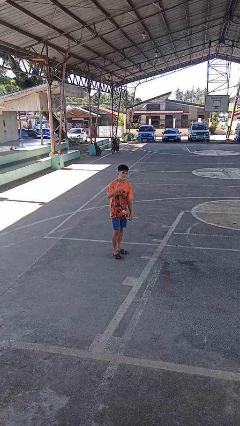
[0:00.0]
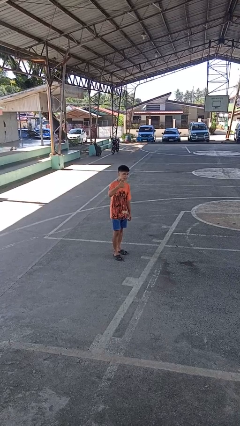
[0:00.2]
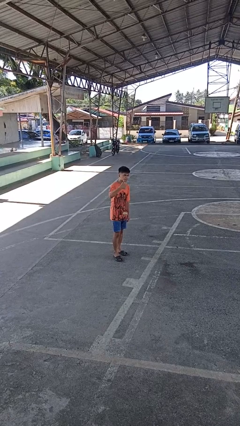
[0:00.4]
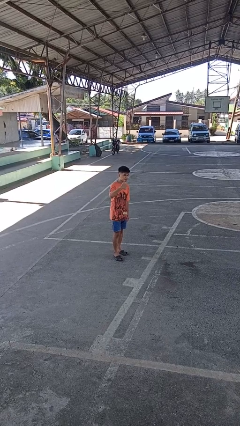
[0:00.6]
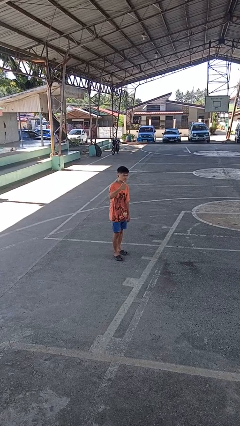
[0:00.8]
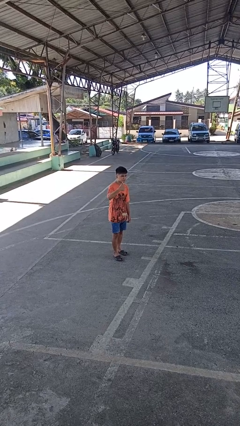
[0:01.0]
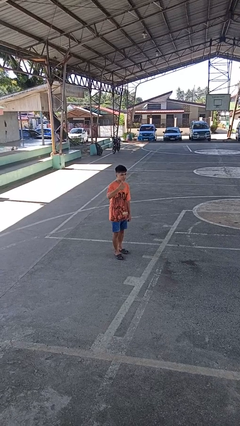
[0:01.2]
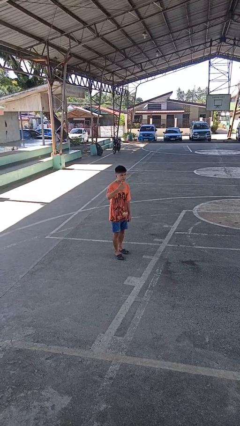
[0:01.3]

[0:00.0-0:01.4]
person gestures thumbs up

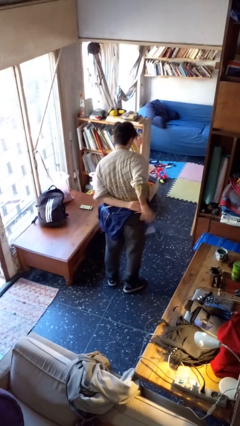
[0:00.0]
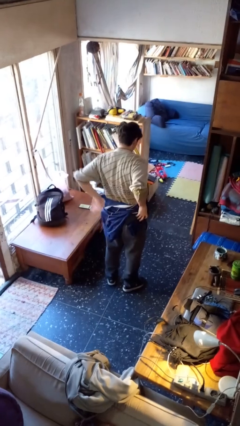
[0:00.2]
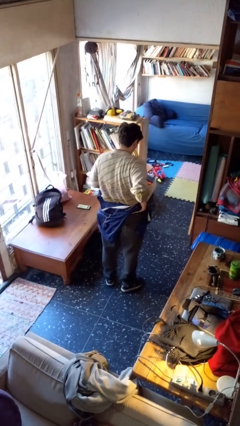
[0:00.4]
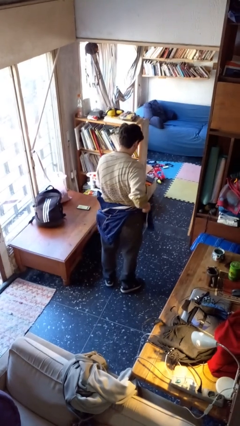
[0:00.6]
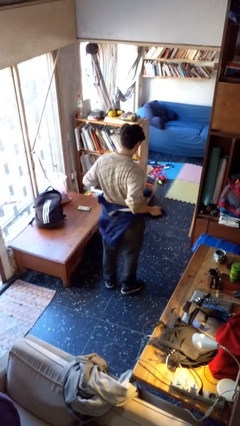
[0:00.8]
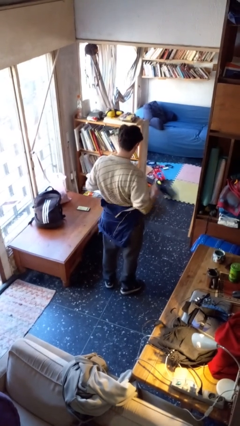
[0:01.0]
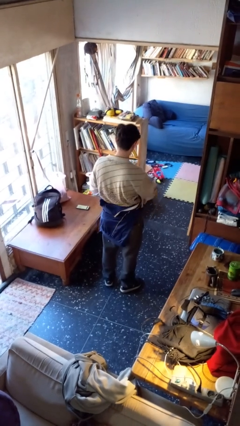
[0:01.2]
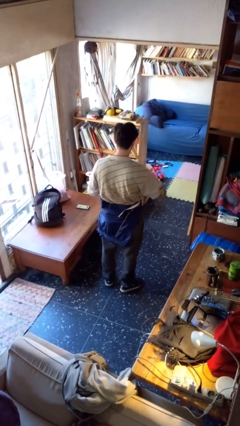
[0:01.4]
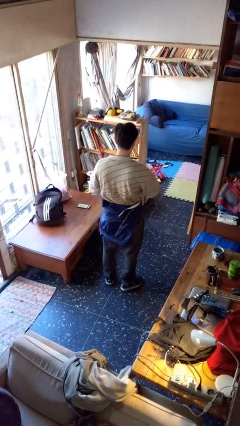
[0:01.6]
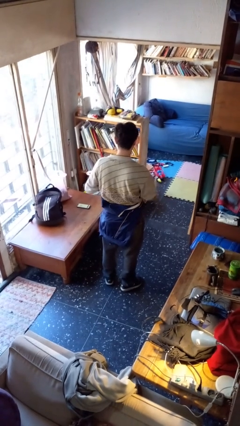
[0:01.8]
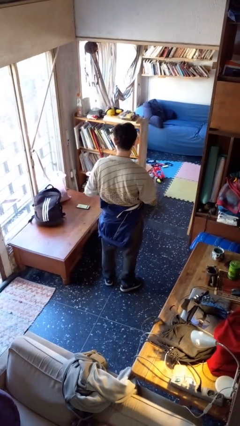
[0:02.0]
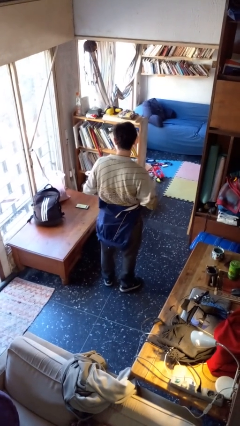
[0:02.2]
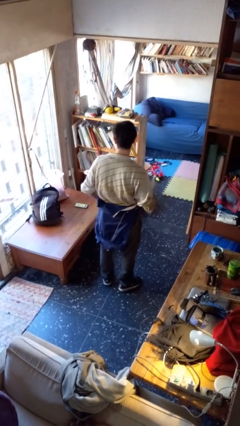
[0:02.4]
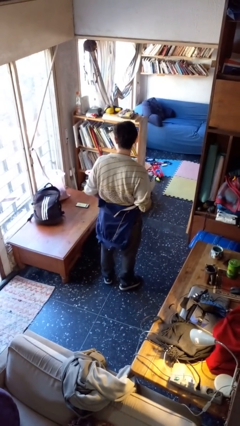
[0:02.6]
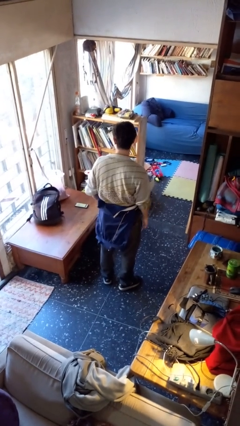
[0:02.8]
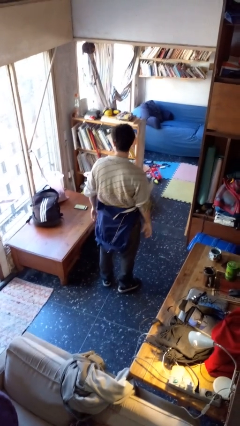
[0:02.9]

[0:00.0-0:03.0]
person ties jacket around waist

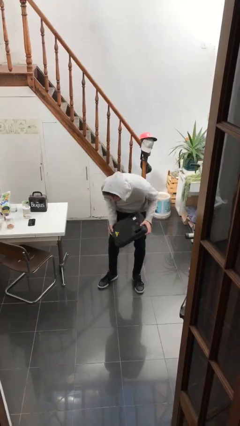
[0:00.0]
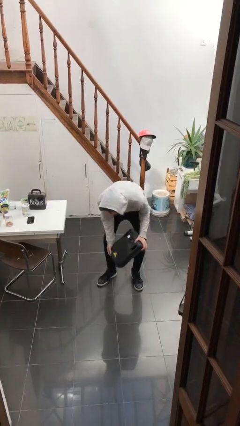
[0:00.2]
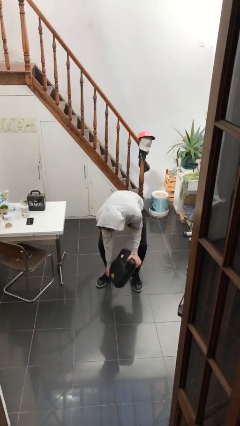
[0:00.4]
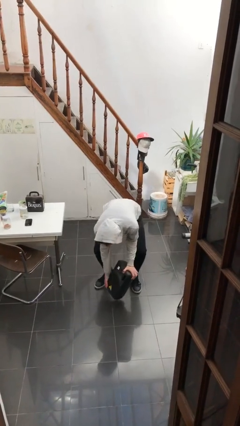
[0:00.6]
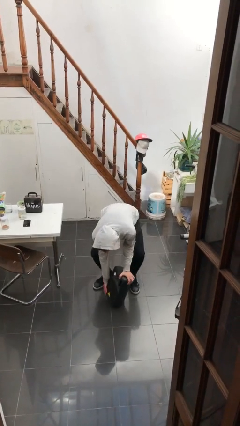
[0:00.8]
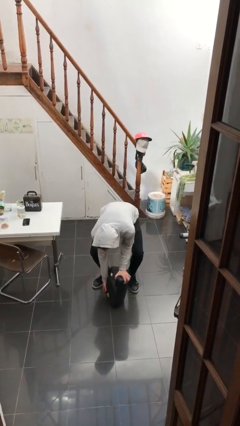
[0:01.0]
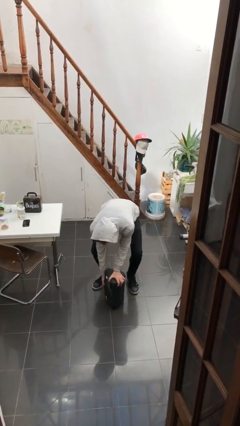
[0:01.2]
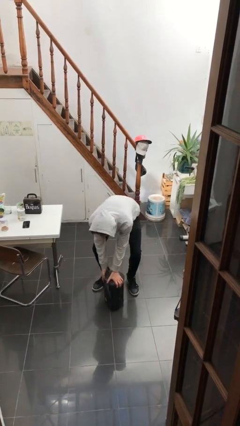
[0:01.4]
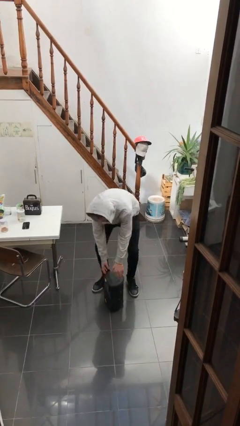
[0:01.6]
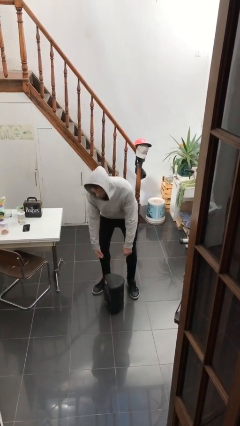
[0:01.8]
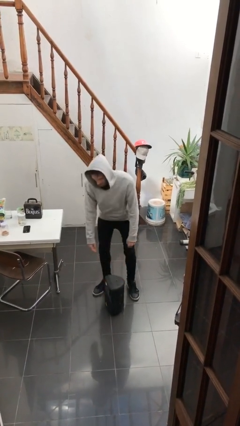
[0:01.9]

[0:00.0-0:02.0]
person puts down object on floor

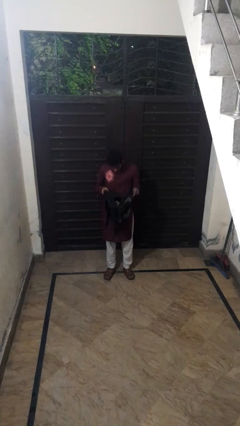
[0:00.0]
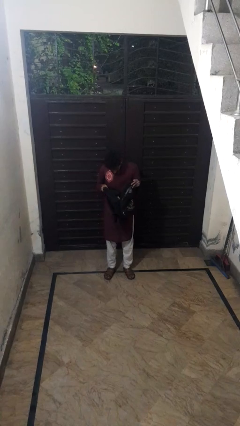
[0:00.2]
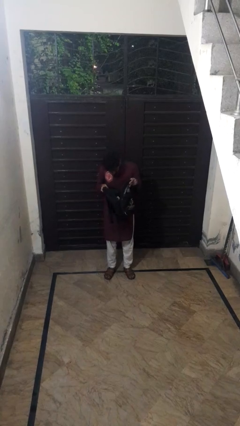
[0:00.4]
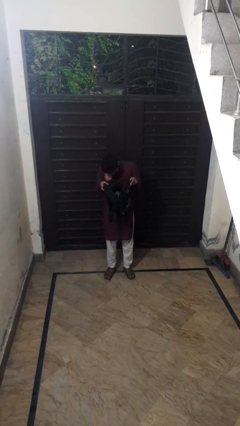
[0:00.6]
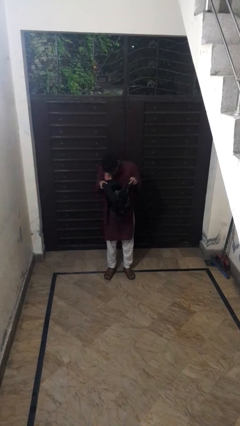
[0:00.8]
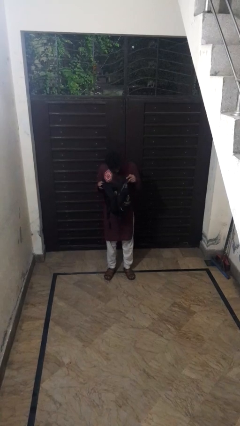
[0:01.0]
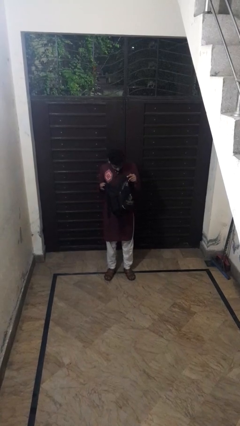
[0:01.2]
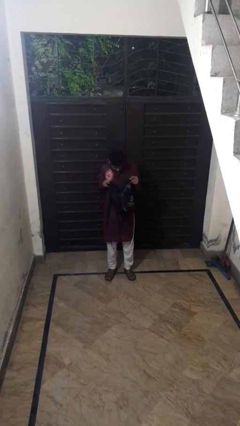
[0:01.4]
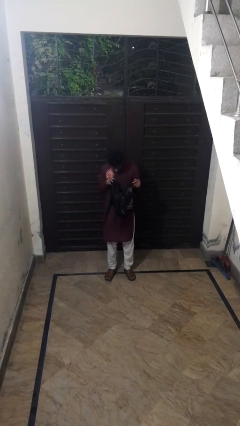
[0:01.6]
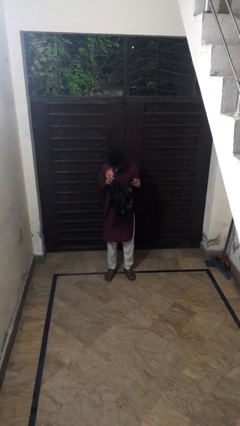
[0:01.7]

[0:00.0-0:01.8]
person searches in backpack

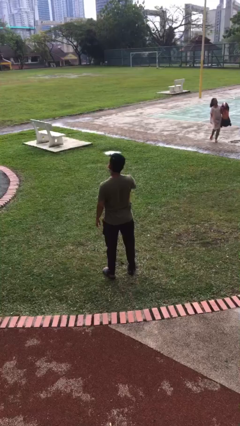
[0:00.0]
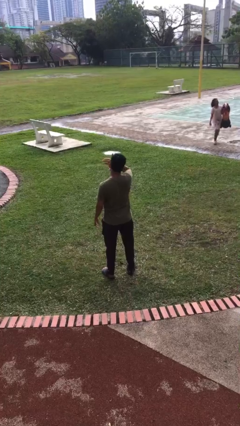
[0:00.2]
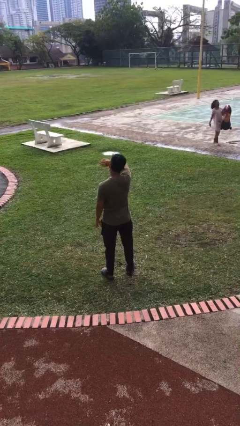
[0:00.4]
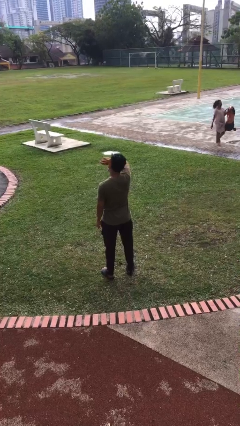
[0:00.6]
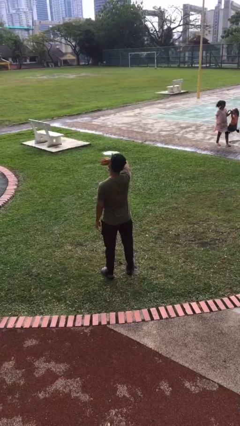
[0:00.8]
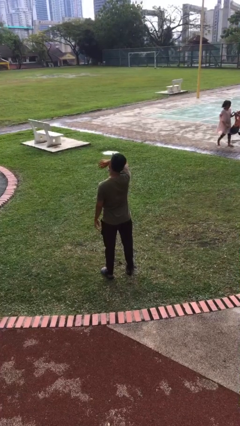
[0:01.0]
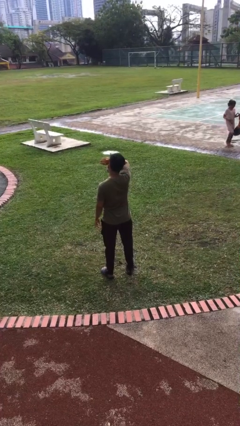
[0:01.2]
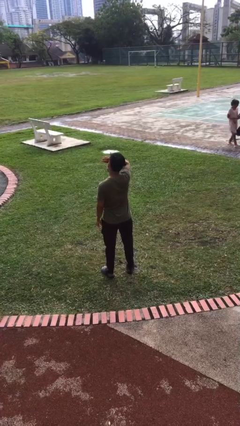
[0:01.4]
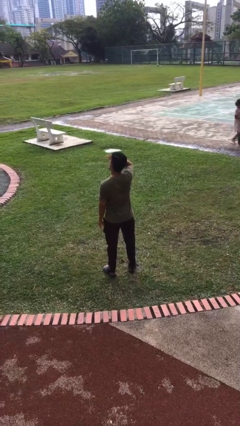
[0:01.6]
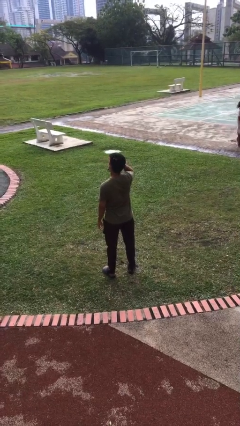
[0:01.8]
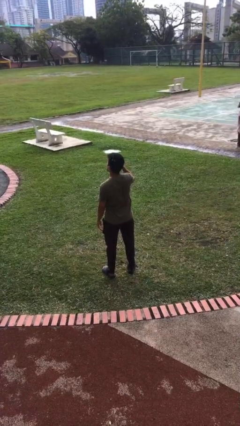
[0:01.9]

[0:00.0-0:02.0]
person rubs eyes

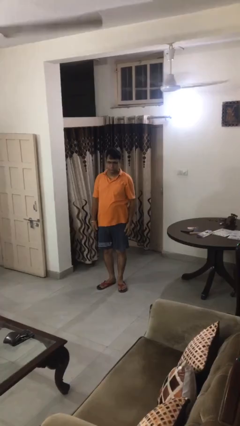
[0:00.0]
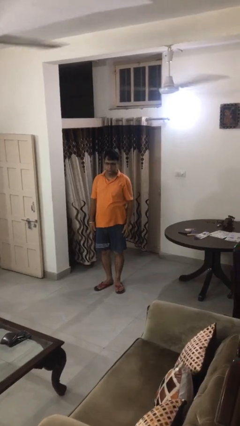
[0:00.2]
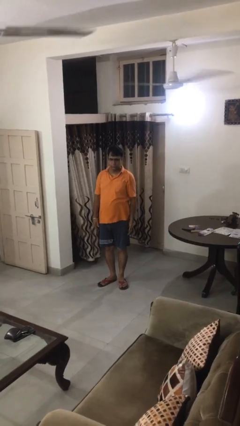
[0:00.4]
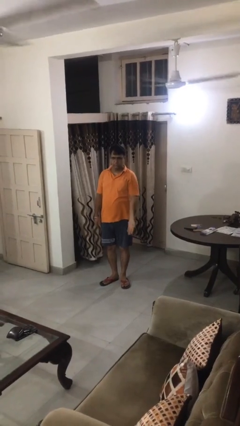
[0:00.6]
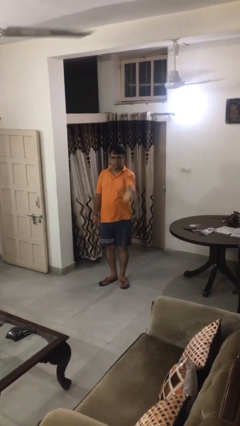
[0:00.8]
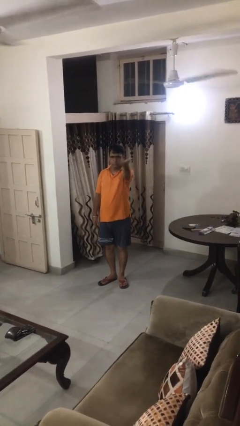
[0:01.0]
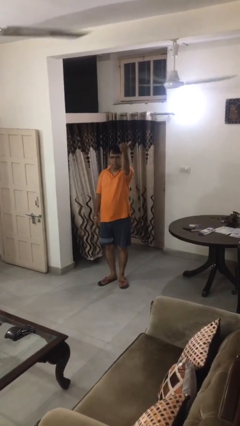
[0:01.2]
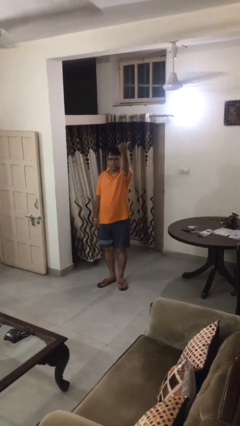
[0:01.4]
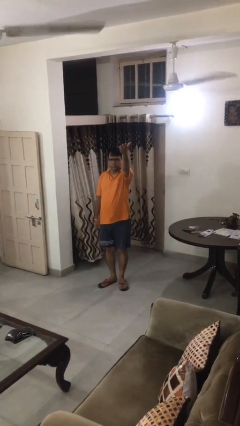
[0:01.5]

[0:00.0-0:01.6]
person gestures swipe up

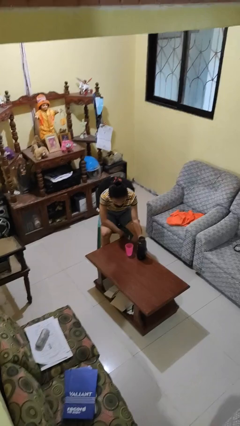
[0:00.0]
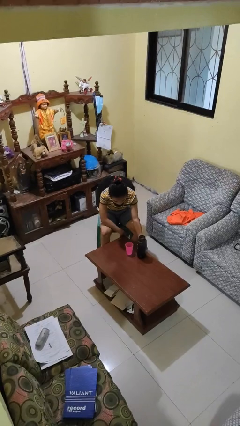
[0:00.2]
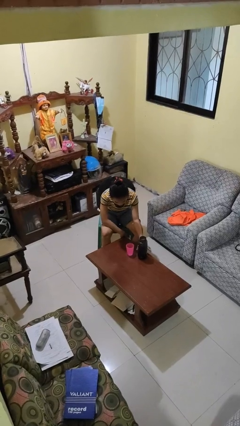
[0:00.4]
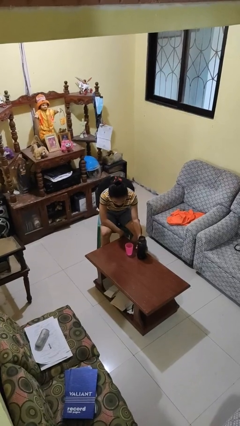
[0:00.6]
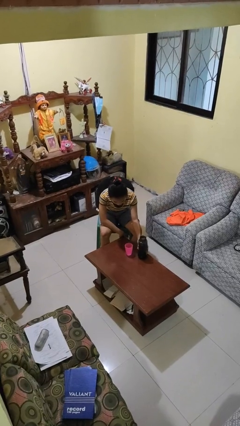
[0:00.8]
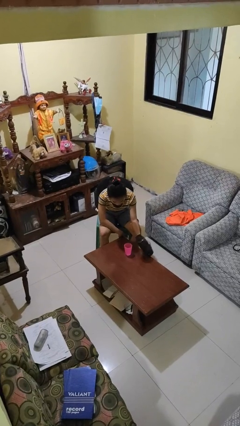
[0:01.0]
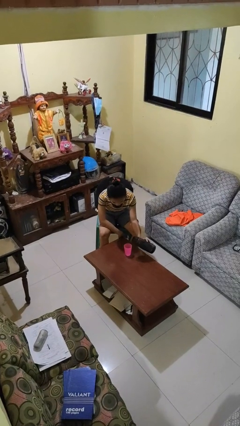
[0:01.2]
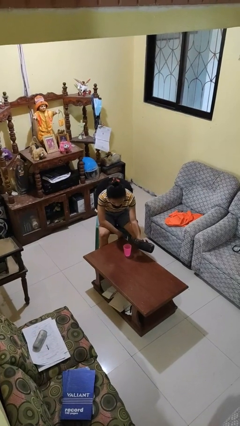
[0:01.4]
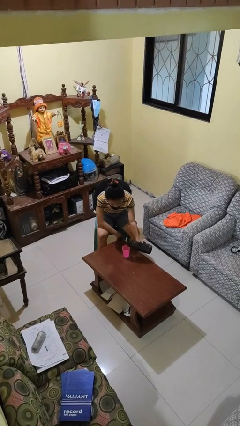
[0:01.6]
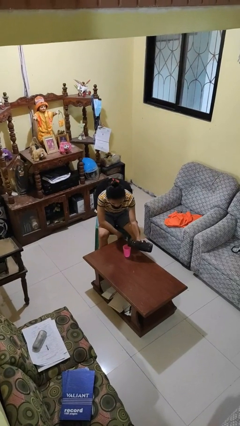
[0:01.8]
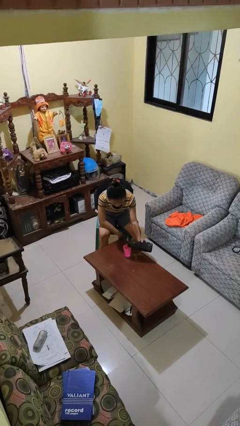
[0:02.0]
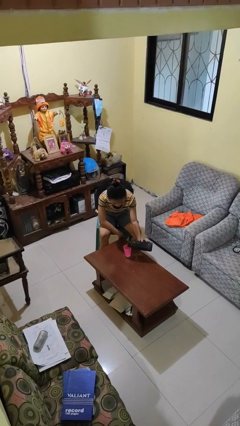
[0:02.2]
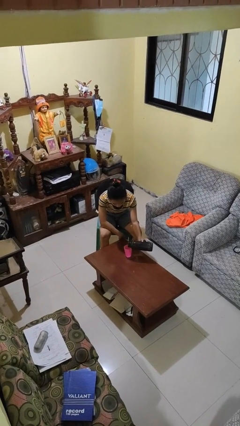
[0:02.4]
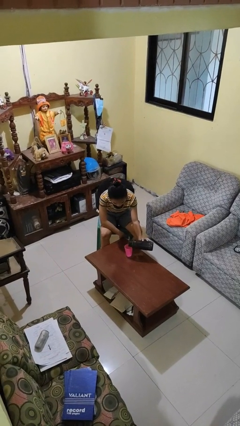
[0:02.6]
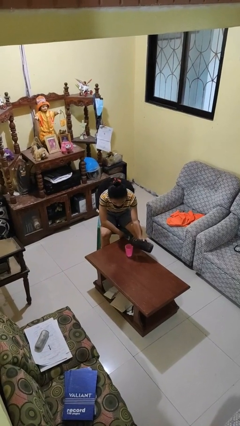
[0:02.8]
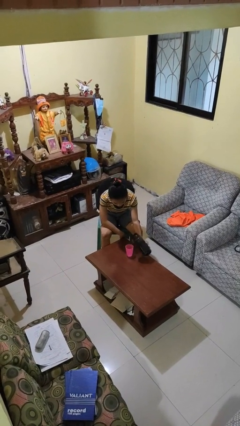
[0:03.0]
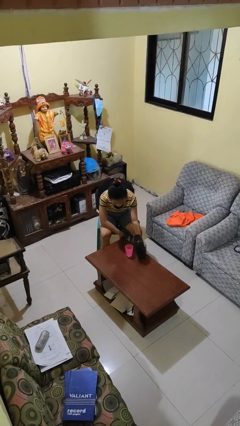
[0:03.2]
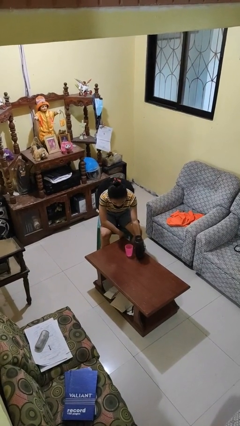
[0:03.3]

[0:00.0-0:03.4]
person pours liquid into cup

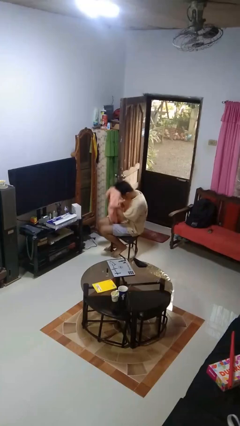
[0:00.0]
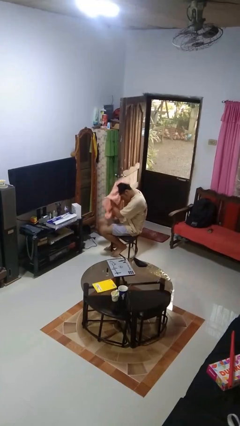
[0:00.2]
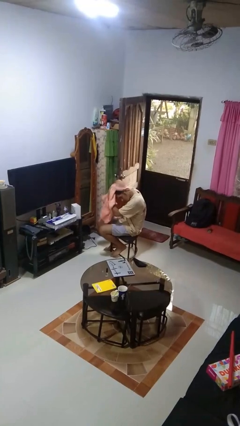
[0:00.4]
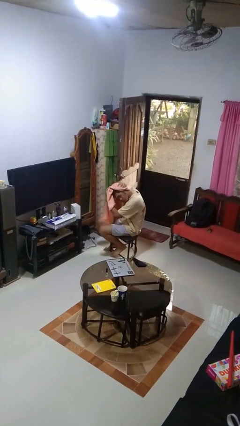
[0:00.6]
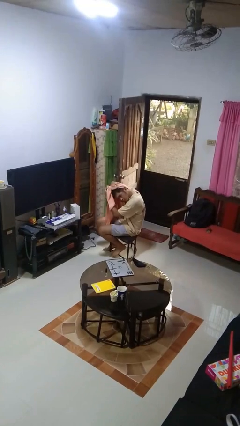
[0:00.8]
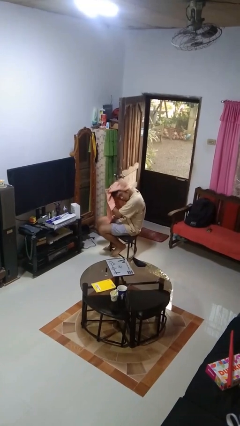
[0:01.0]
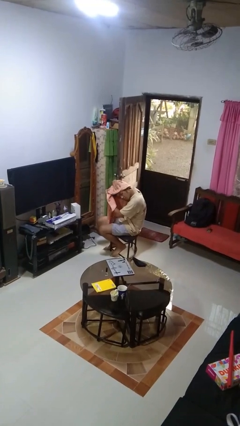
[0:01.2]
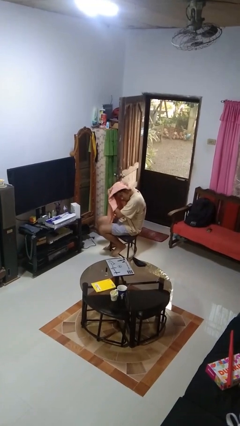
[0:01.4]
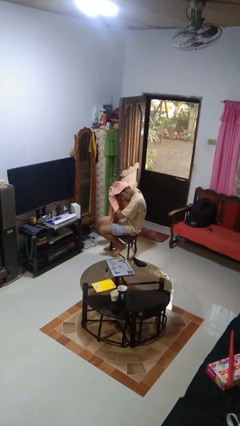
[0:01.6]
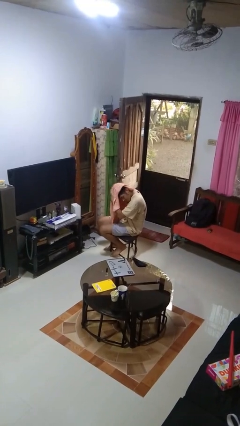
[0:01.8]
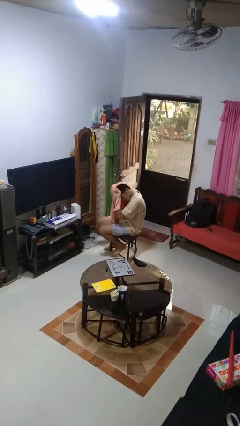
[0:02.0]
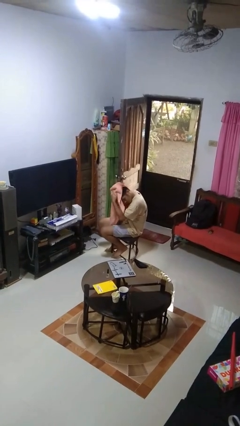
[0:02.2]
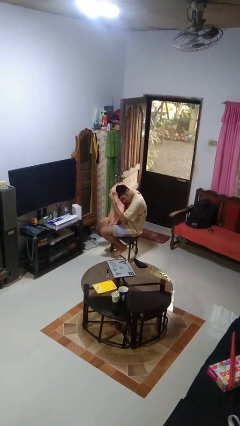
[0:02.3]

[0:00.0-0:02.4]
person dries hair with towel
